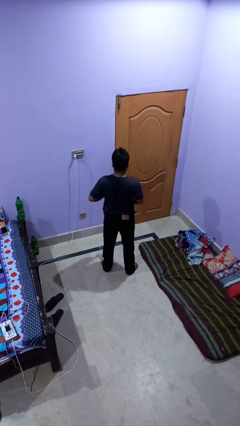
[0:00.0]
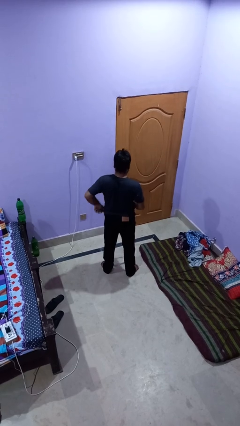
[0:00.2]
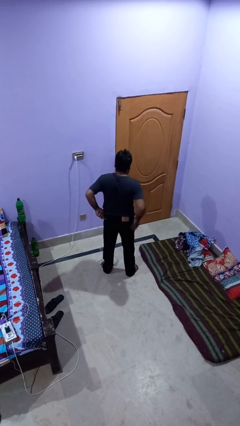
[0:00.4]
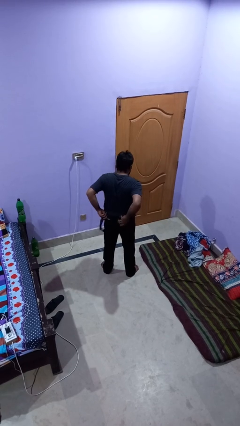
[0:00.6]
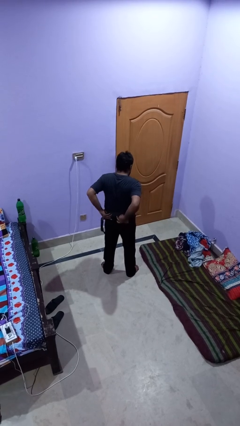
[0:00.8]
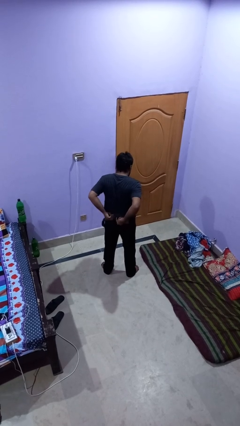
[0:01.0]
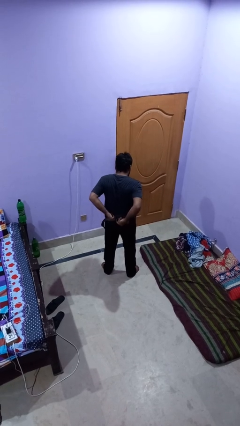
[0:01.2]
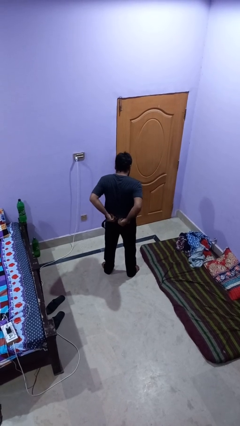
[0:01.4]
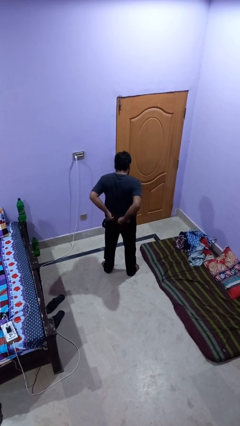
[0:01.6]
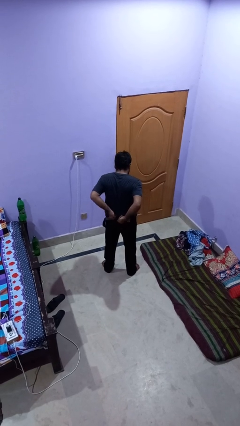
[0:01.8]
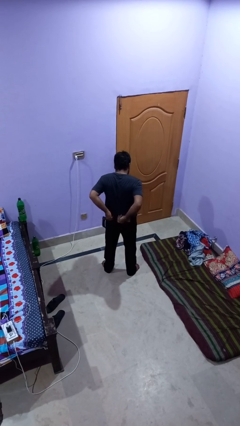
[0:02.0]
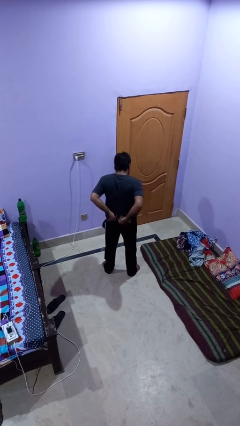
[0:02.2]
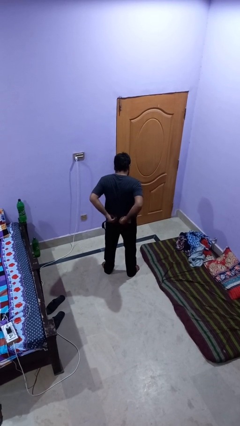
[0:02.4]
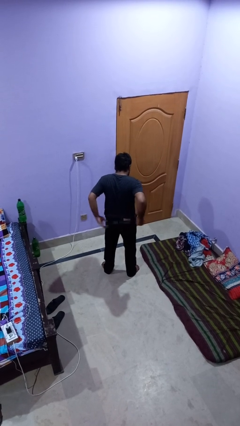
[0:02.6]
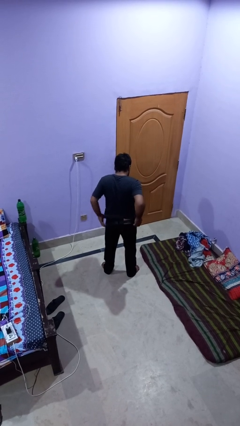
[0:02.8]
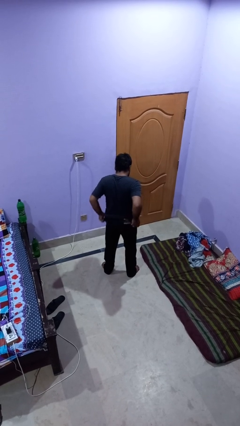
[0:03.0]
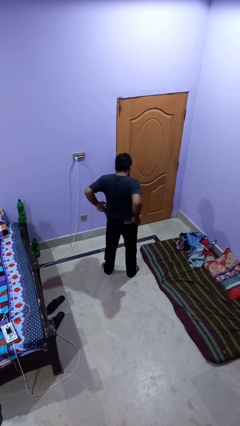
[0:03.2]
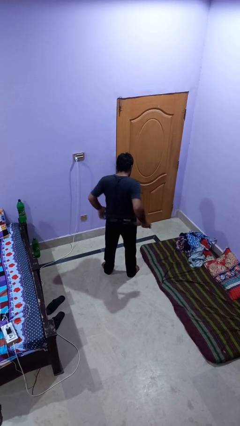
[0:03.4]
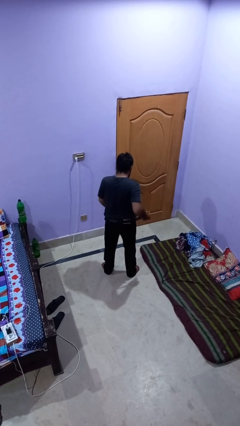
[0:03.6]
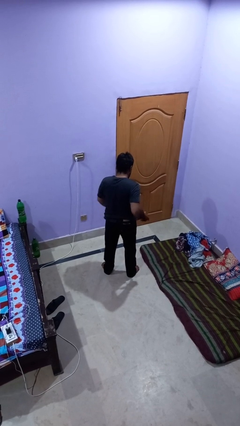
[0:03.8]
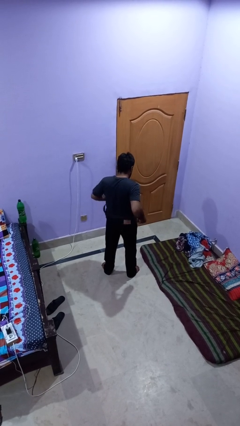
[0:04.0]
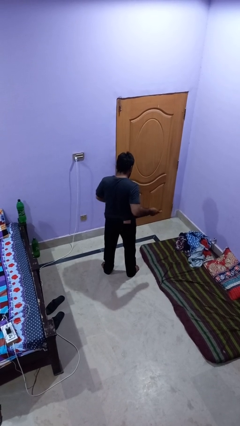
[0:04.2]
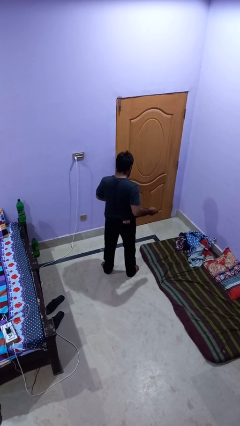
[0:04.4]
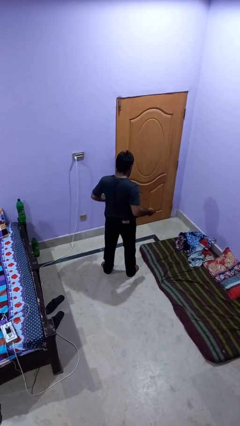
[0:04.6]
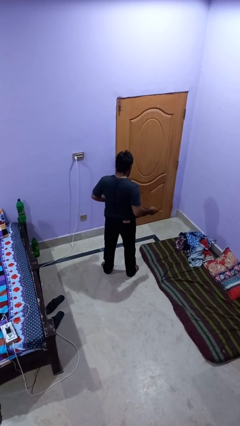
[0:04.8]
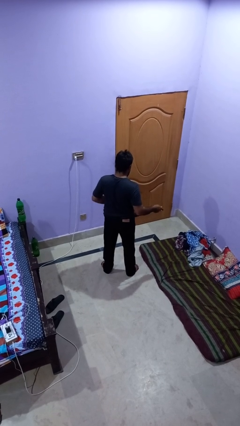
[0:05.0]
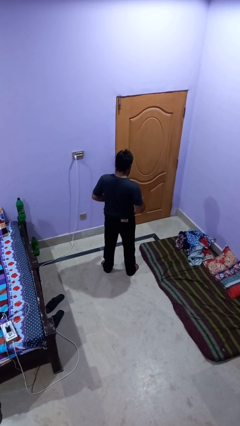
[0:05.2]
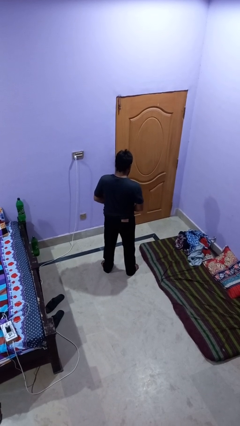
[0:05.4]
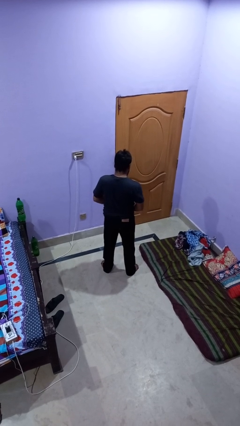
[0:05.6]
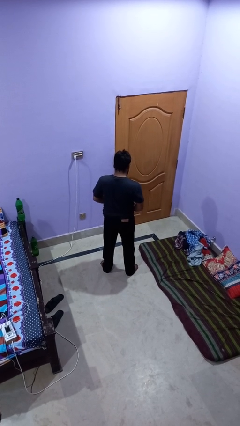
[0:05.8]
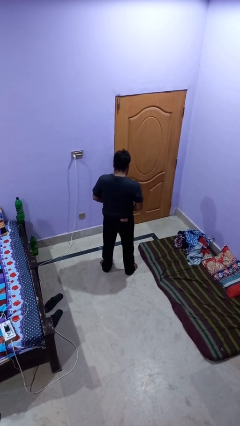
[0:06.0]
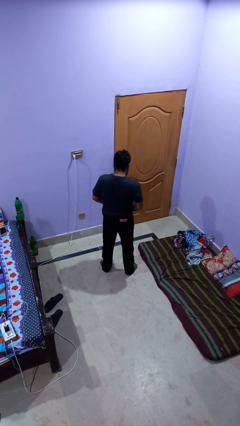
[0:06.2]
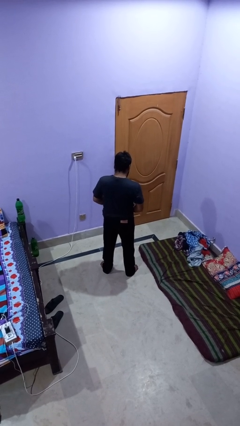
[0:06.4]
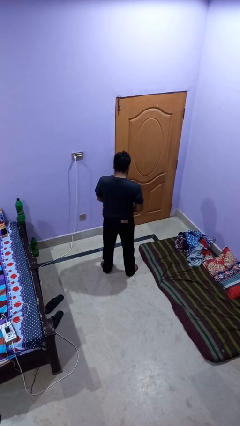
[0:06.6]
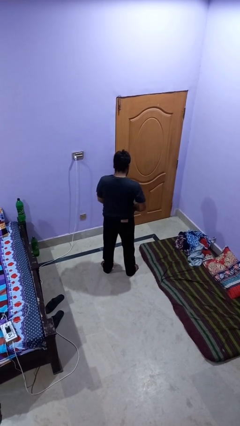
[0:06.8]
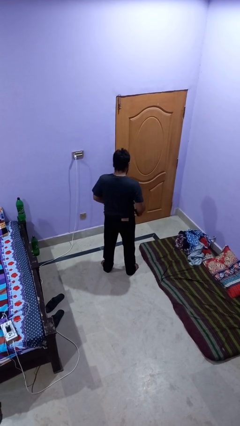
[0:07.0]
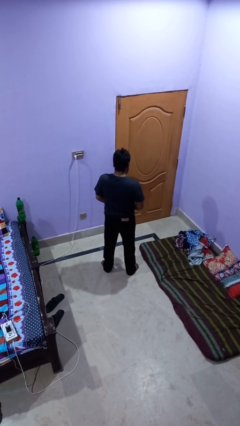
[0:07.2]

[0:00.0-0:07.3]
person puts on belt

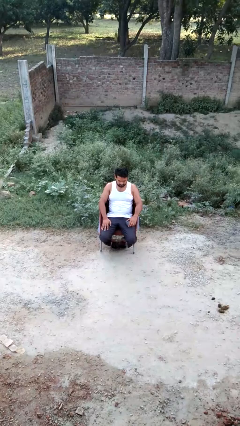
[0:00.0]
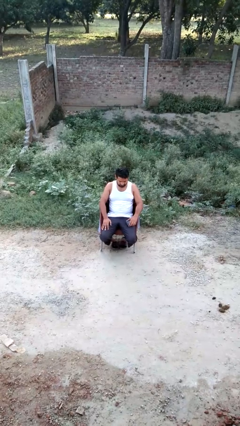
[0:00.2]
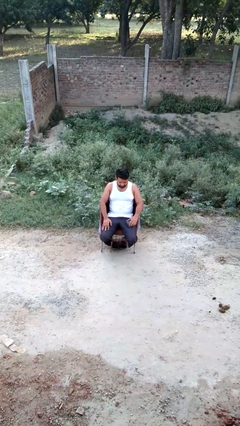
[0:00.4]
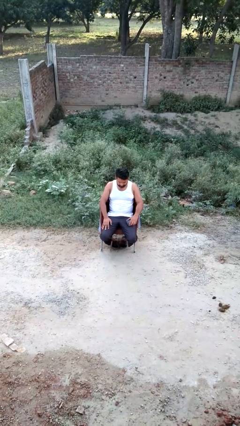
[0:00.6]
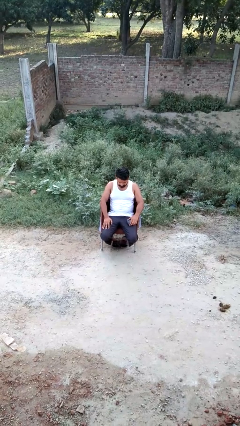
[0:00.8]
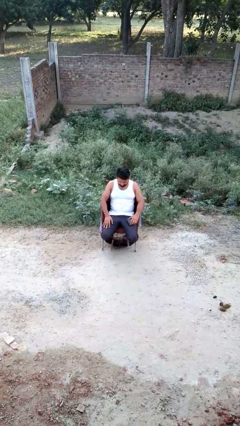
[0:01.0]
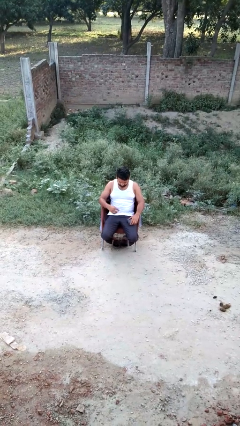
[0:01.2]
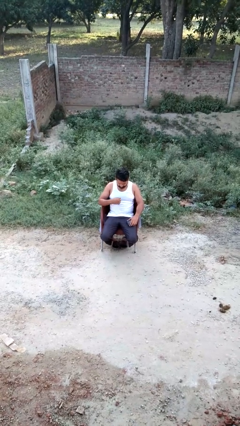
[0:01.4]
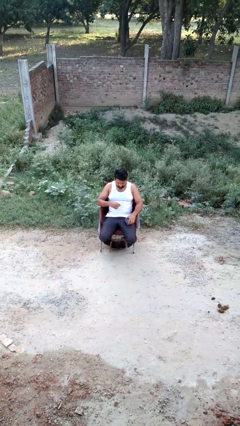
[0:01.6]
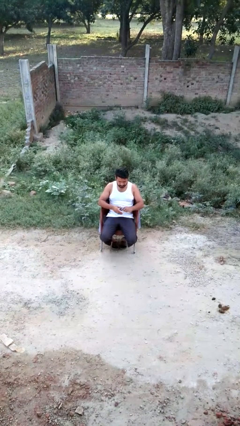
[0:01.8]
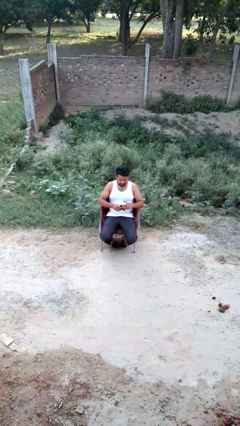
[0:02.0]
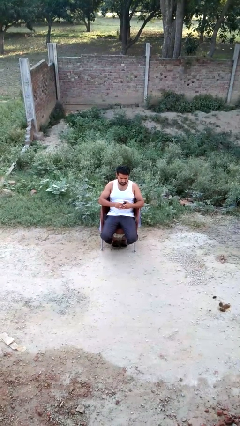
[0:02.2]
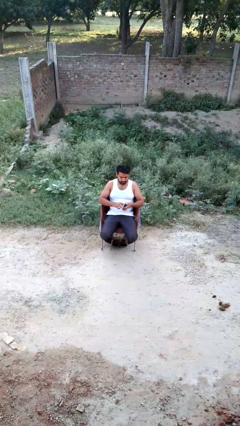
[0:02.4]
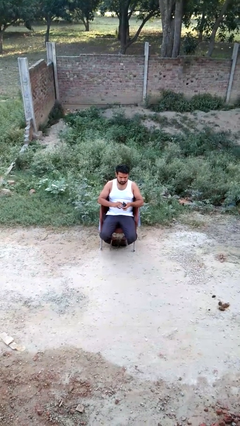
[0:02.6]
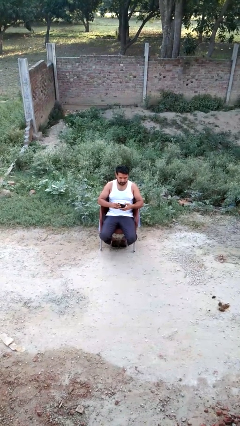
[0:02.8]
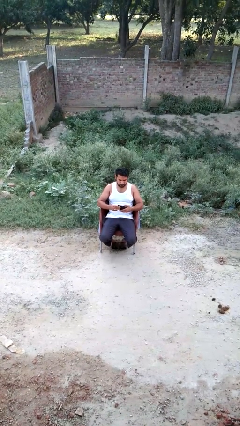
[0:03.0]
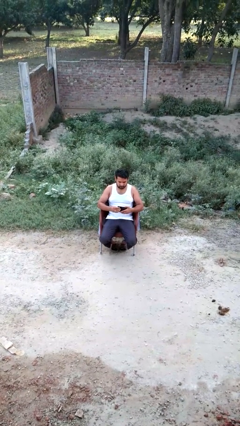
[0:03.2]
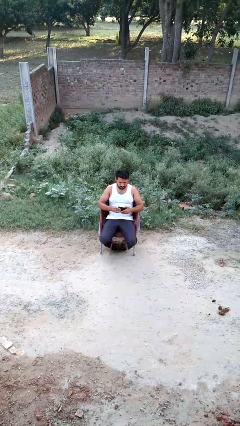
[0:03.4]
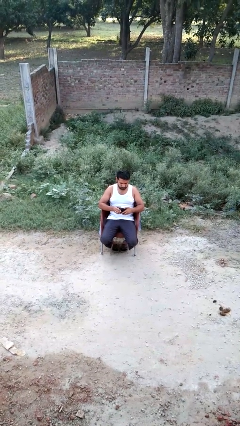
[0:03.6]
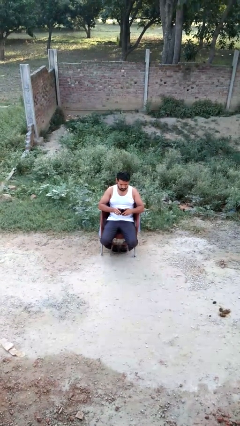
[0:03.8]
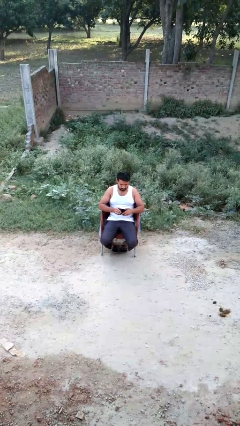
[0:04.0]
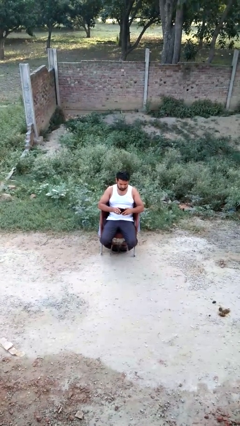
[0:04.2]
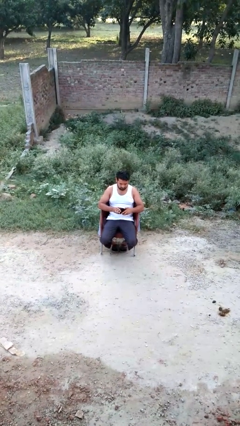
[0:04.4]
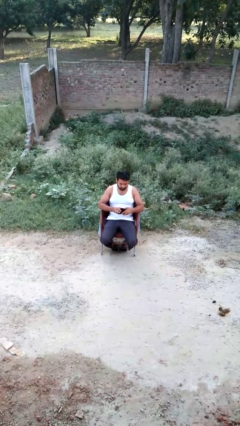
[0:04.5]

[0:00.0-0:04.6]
person searches in purse

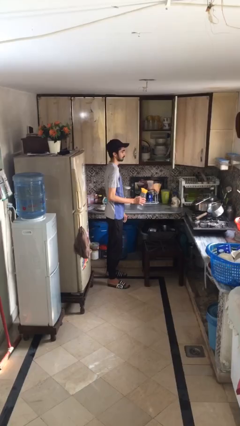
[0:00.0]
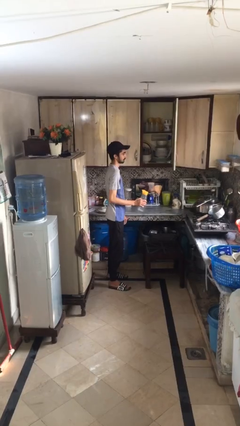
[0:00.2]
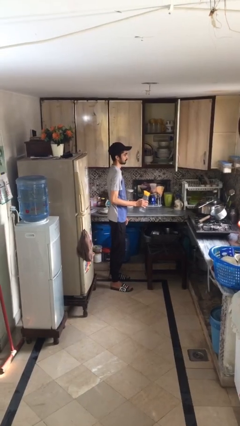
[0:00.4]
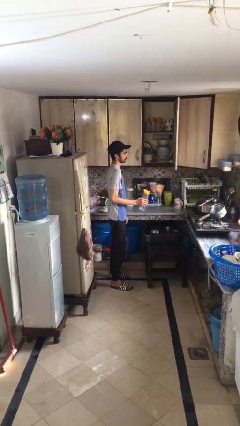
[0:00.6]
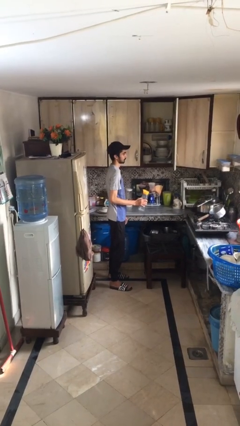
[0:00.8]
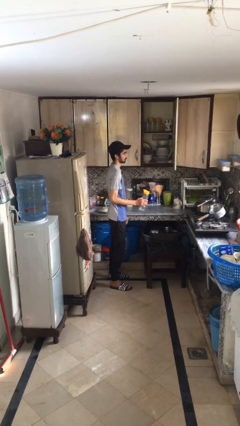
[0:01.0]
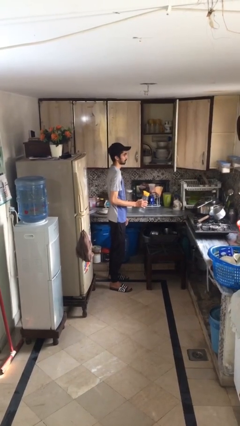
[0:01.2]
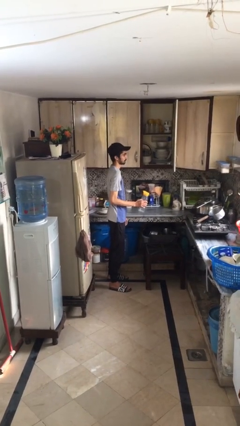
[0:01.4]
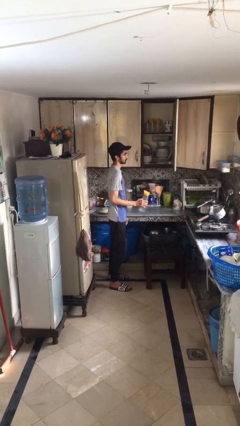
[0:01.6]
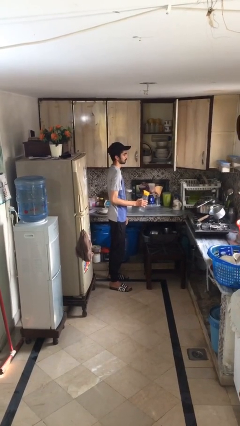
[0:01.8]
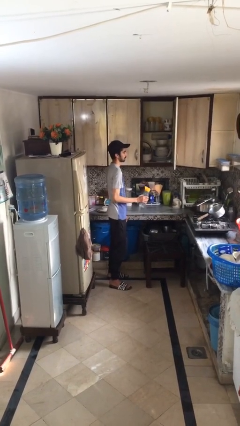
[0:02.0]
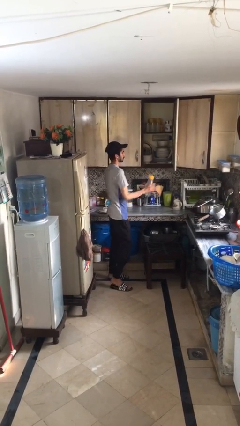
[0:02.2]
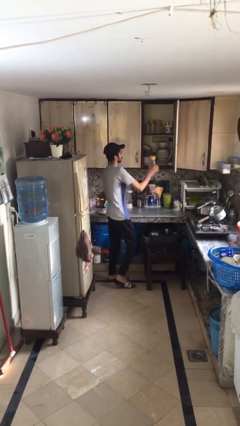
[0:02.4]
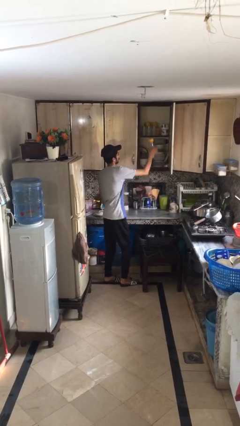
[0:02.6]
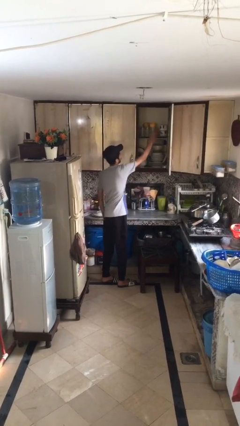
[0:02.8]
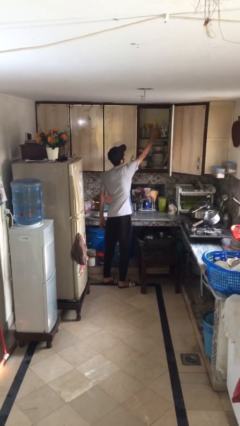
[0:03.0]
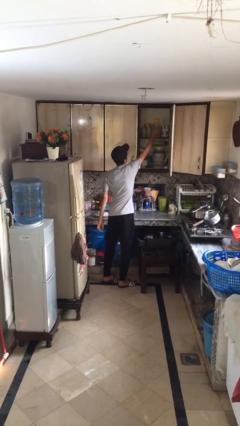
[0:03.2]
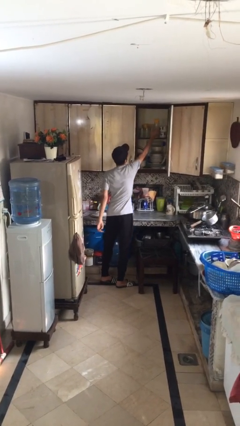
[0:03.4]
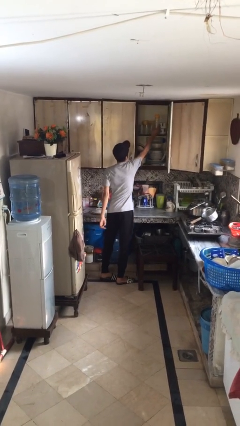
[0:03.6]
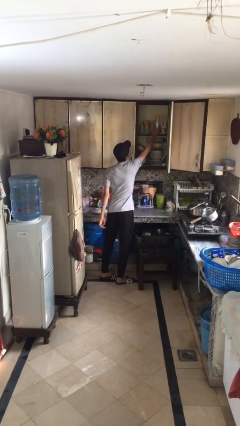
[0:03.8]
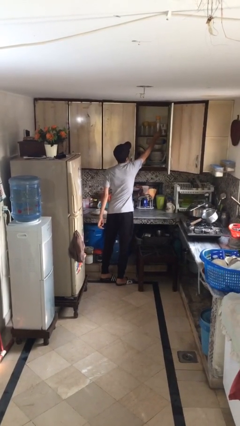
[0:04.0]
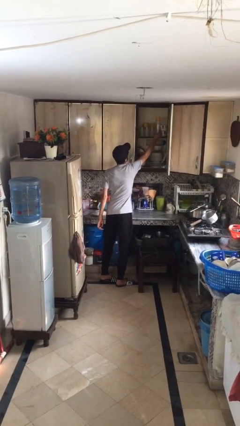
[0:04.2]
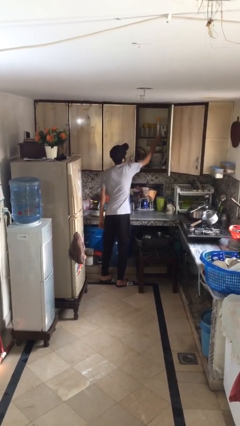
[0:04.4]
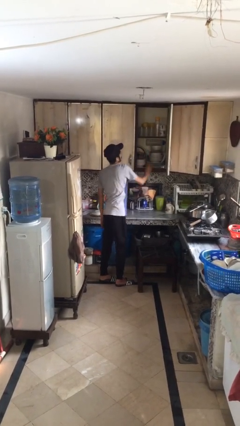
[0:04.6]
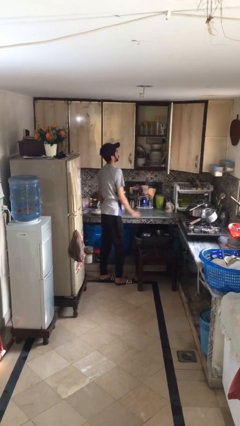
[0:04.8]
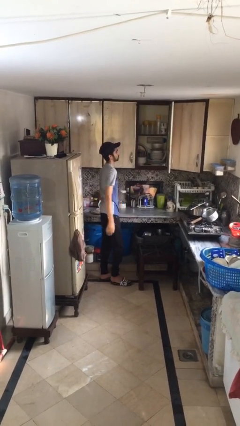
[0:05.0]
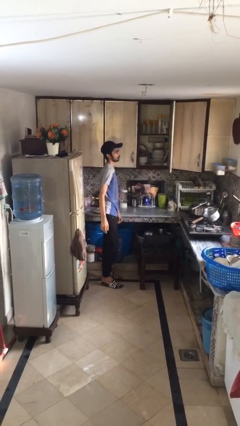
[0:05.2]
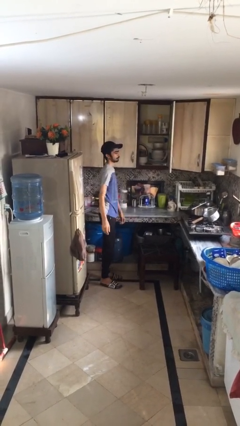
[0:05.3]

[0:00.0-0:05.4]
person puts down object on shelf

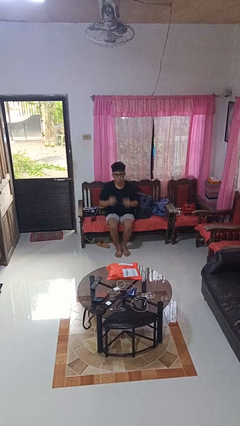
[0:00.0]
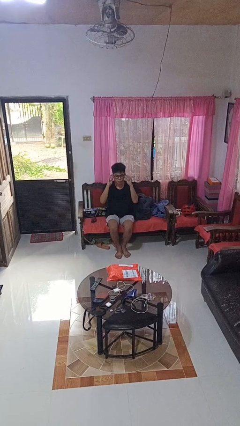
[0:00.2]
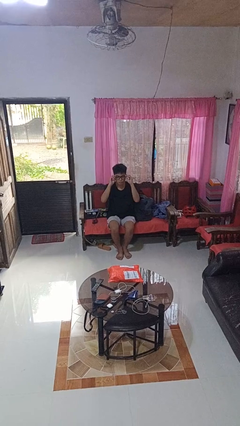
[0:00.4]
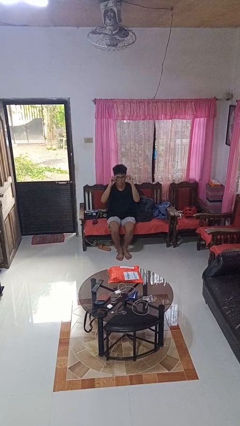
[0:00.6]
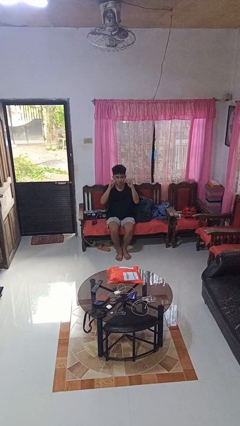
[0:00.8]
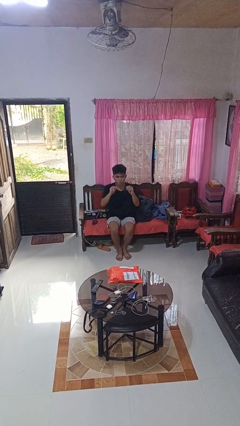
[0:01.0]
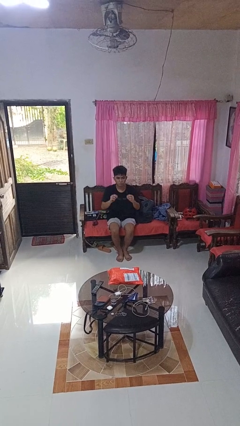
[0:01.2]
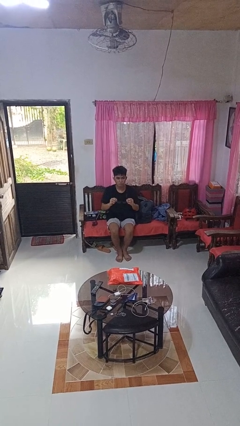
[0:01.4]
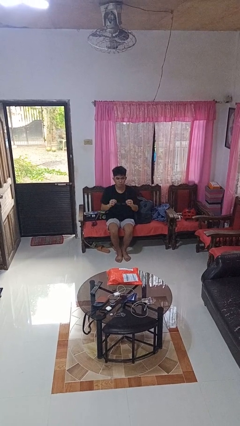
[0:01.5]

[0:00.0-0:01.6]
person takes off glasses
